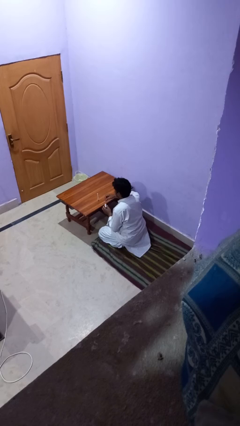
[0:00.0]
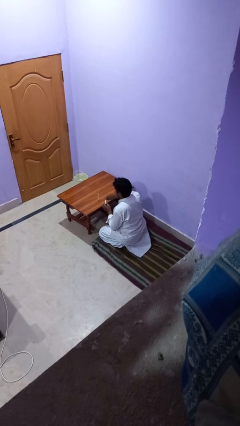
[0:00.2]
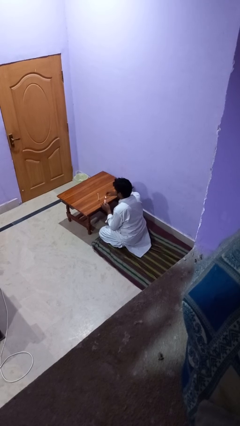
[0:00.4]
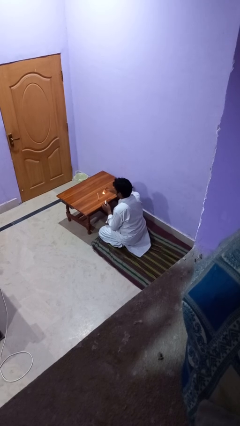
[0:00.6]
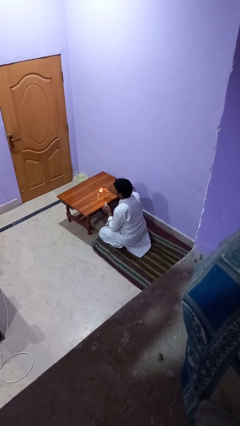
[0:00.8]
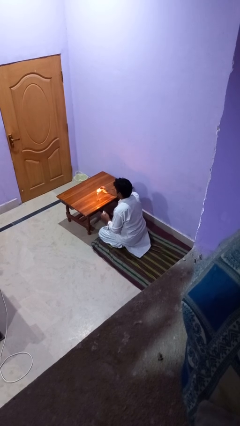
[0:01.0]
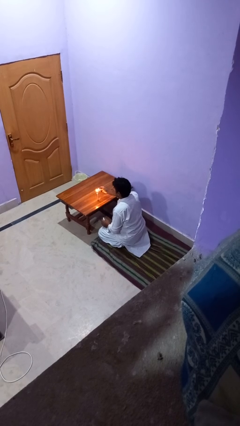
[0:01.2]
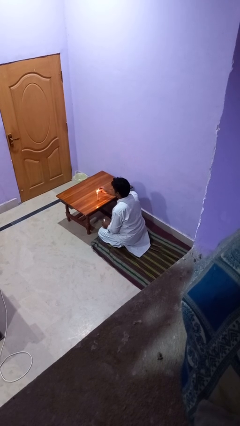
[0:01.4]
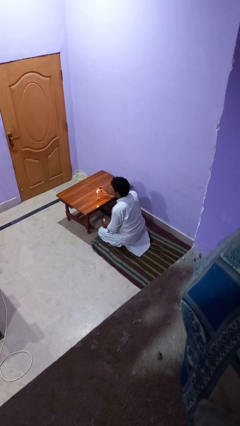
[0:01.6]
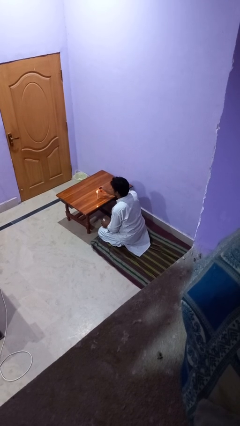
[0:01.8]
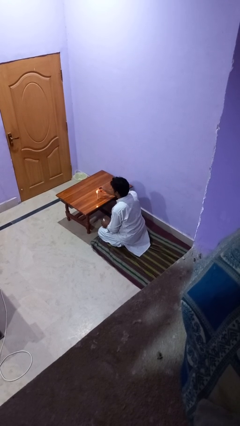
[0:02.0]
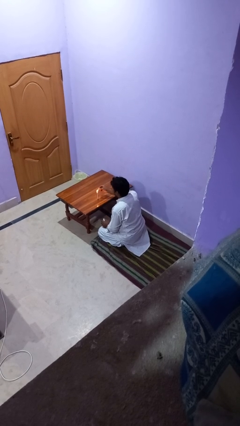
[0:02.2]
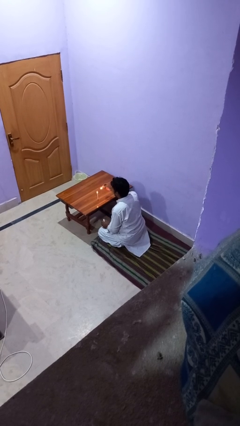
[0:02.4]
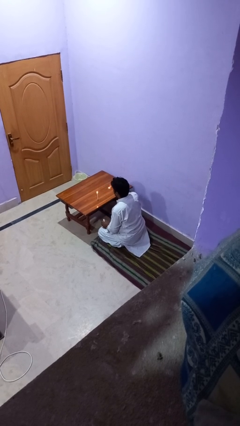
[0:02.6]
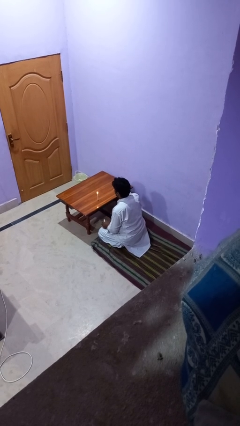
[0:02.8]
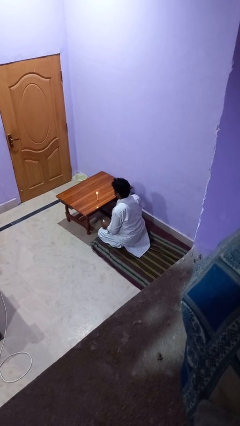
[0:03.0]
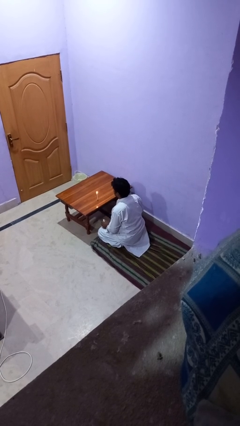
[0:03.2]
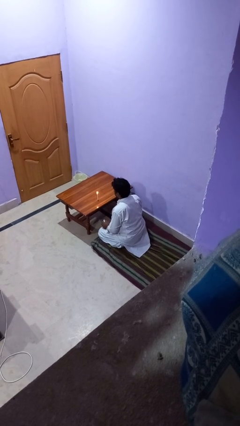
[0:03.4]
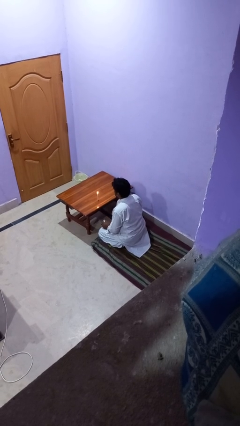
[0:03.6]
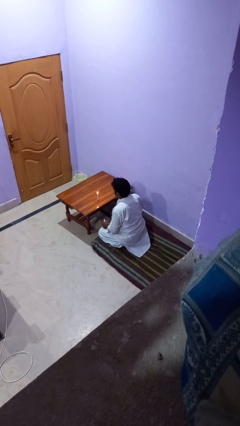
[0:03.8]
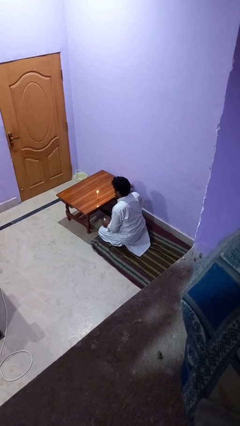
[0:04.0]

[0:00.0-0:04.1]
person lights candle

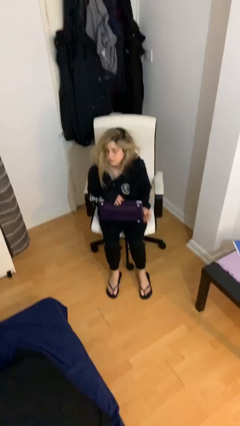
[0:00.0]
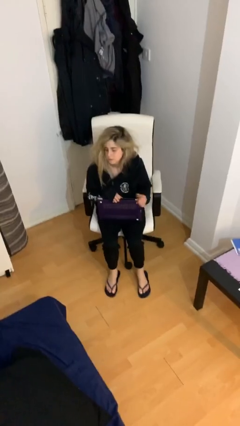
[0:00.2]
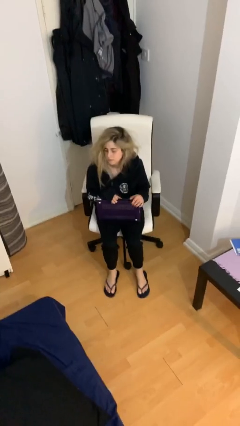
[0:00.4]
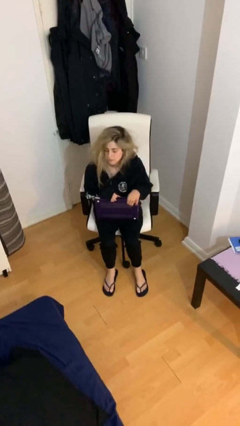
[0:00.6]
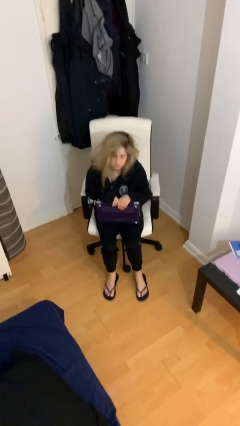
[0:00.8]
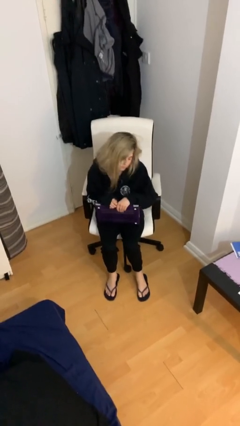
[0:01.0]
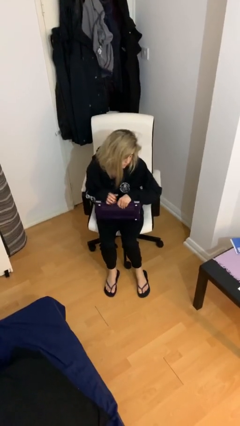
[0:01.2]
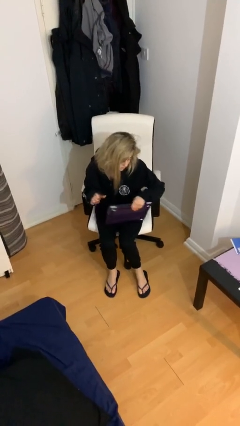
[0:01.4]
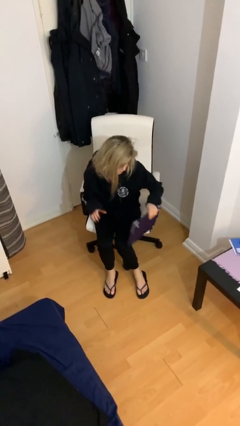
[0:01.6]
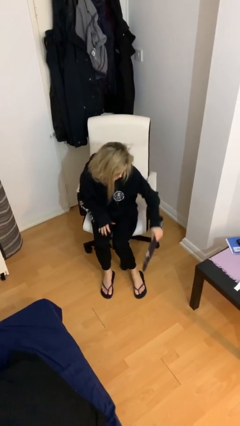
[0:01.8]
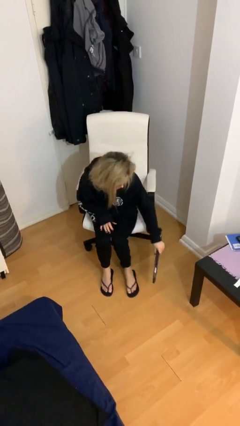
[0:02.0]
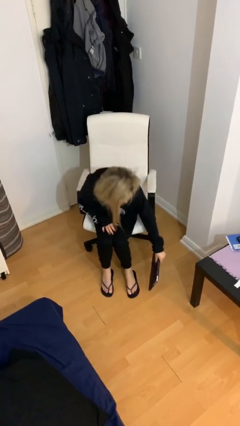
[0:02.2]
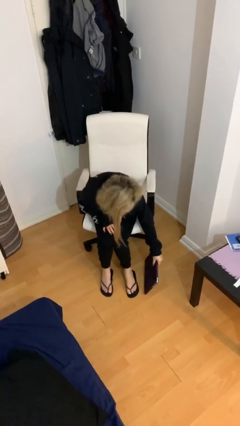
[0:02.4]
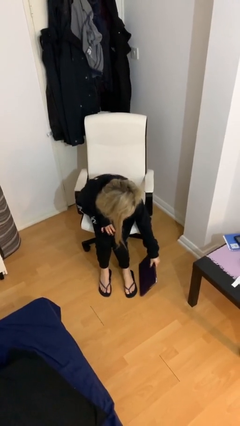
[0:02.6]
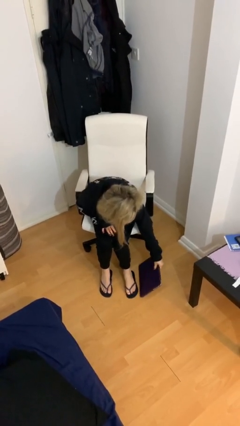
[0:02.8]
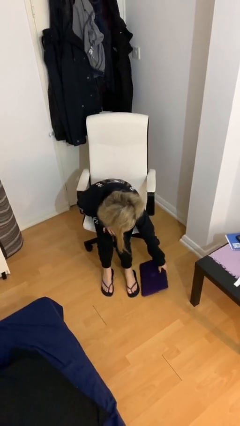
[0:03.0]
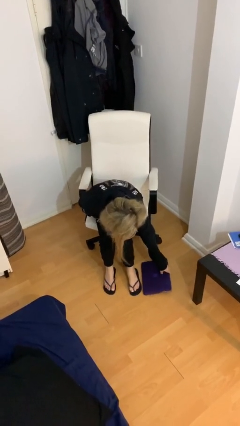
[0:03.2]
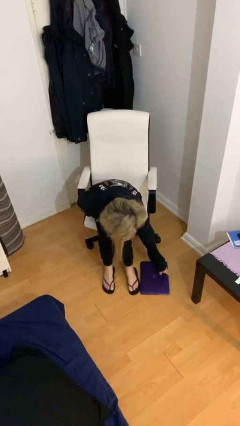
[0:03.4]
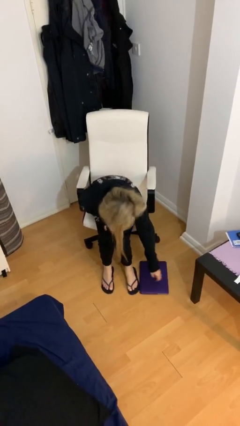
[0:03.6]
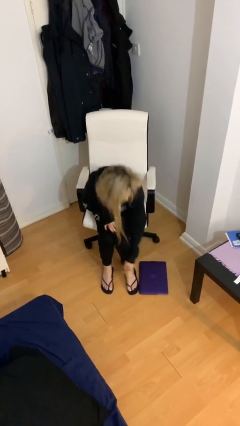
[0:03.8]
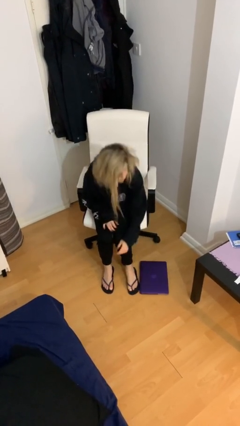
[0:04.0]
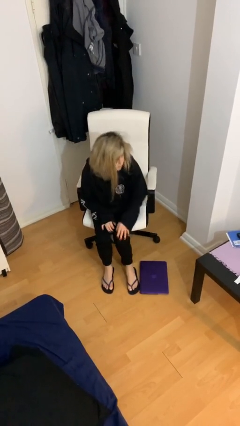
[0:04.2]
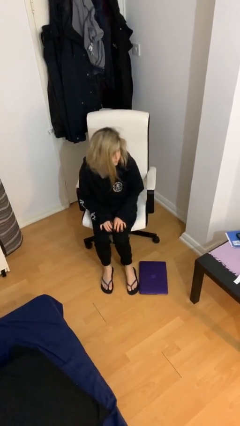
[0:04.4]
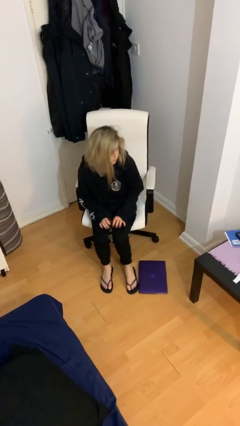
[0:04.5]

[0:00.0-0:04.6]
person puts down object on floor

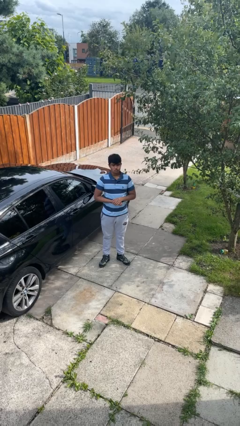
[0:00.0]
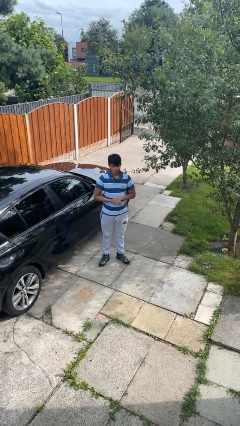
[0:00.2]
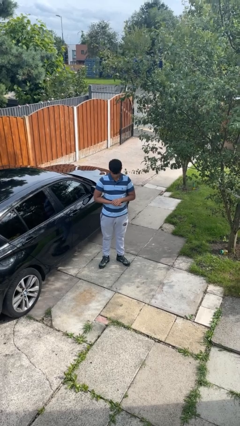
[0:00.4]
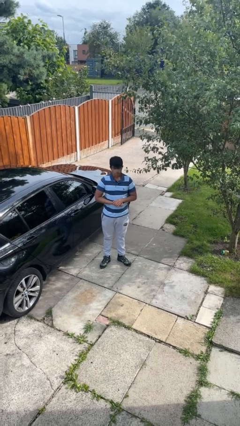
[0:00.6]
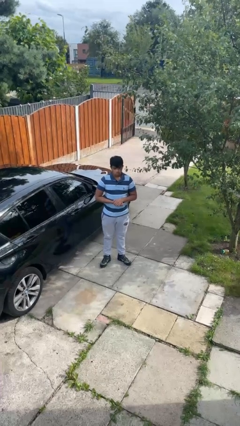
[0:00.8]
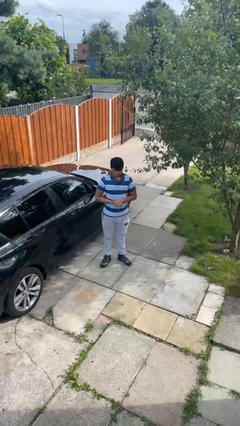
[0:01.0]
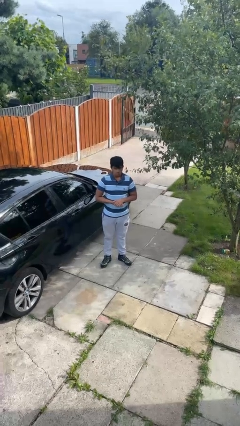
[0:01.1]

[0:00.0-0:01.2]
person nods head

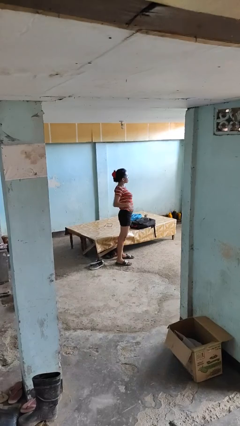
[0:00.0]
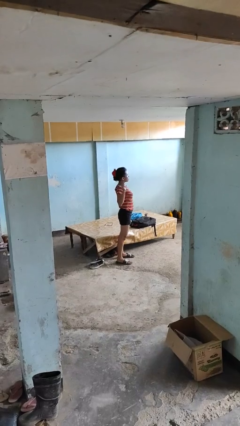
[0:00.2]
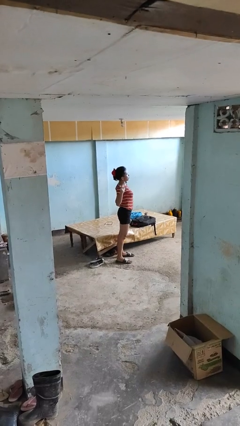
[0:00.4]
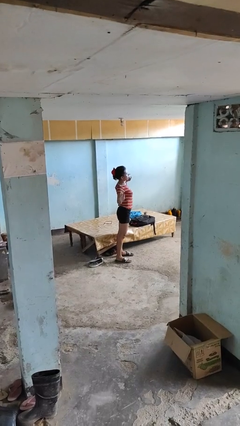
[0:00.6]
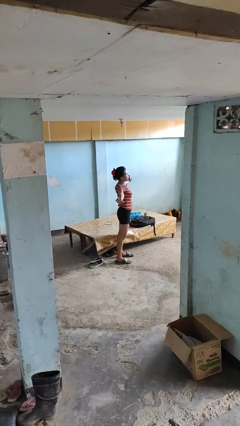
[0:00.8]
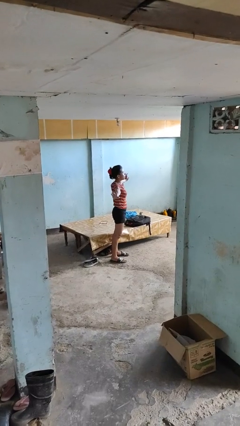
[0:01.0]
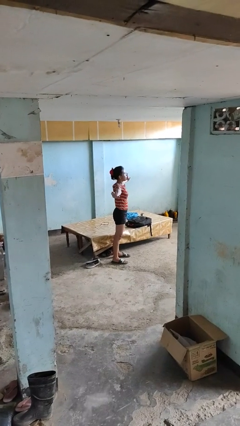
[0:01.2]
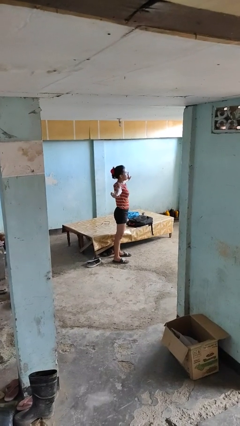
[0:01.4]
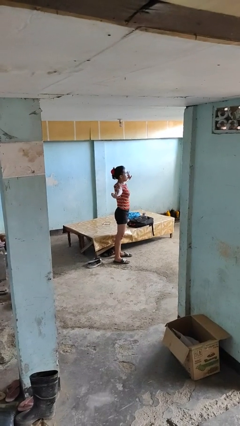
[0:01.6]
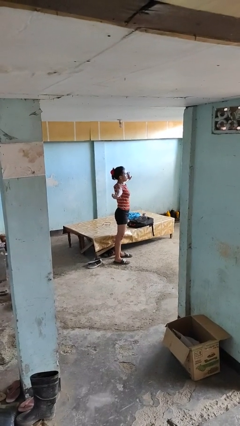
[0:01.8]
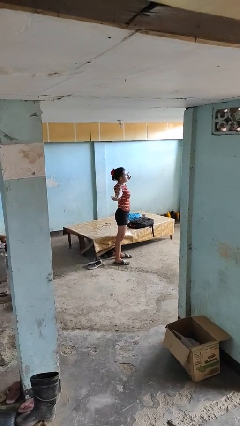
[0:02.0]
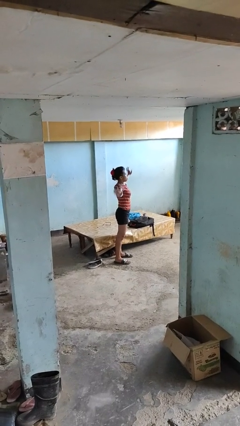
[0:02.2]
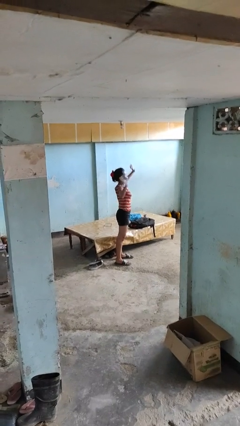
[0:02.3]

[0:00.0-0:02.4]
person stretches arms to side

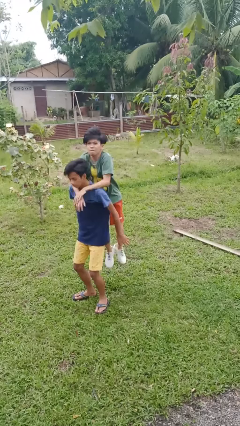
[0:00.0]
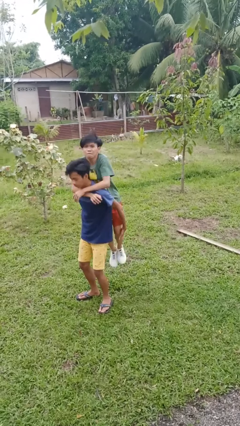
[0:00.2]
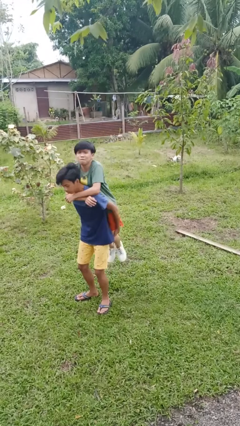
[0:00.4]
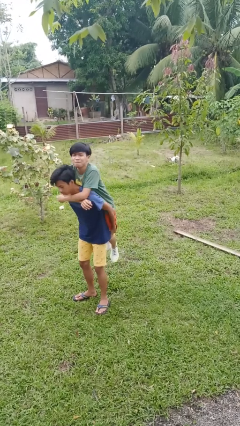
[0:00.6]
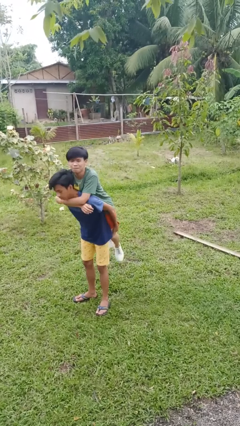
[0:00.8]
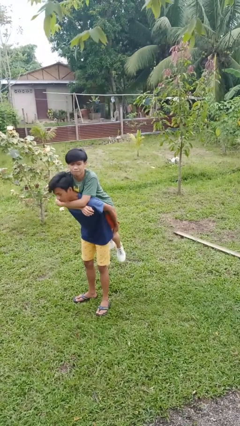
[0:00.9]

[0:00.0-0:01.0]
person carries person over shoulder

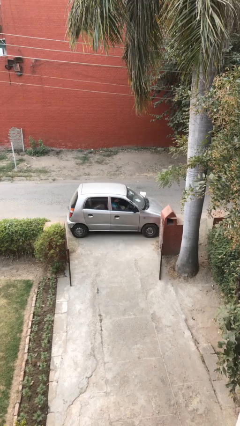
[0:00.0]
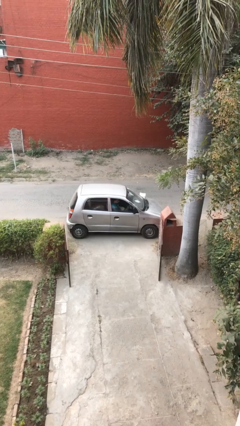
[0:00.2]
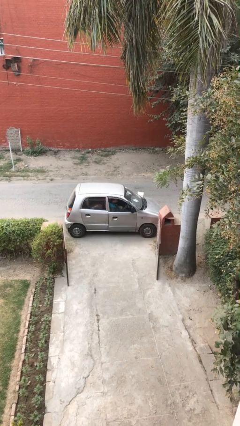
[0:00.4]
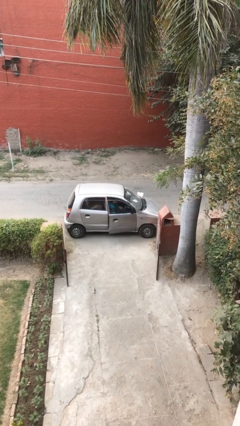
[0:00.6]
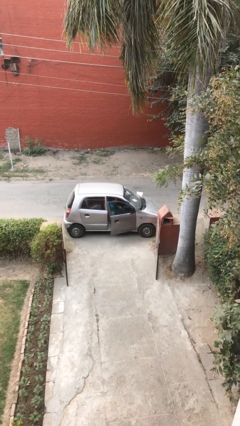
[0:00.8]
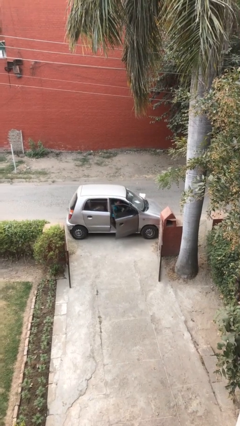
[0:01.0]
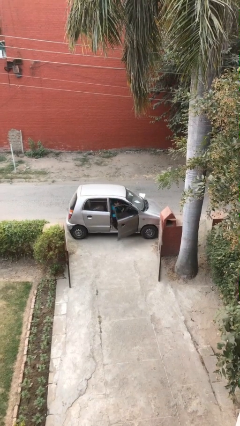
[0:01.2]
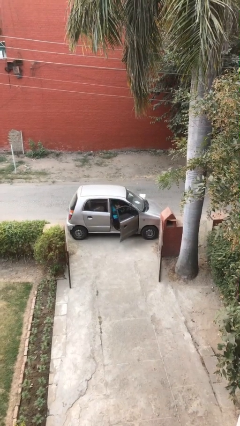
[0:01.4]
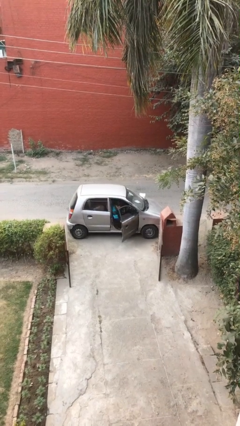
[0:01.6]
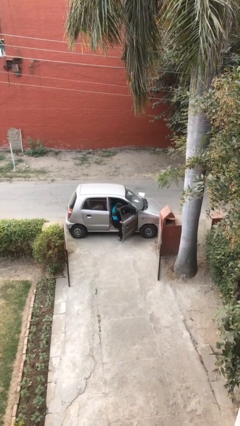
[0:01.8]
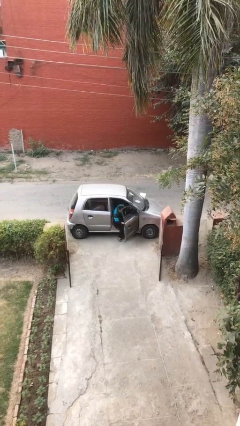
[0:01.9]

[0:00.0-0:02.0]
person opens car door

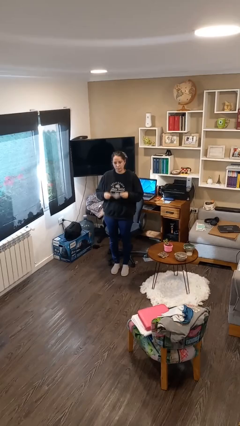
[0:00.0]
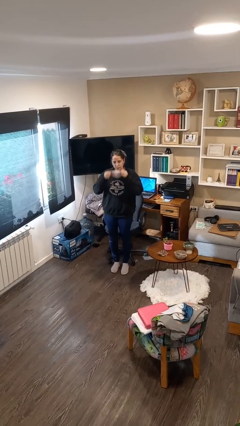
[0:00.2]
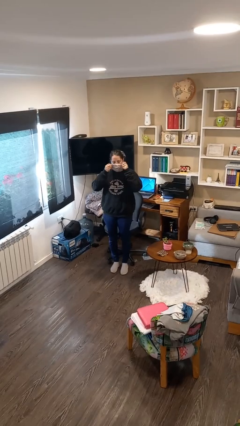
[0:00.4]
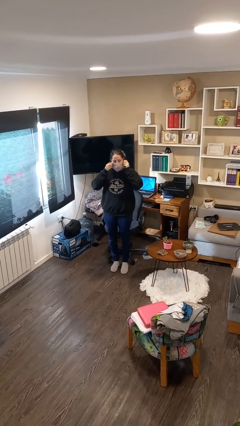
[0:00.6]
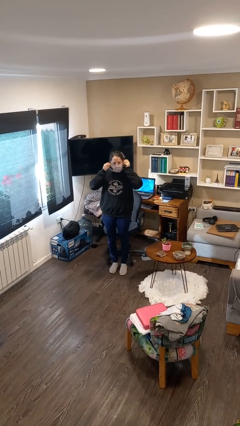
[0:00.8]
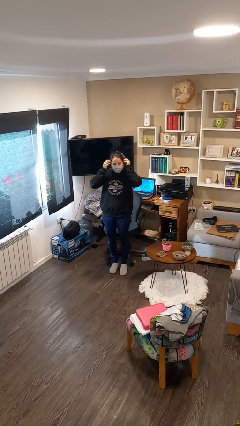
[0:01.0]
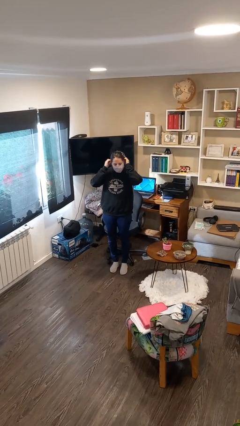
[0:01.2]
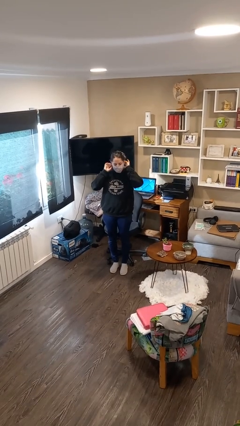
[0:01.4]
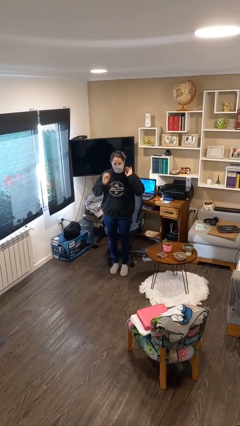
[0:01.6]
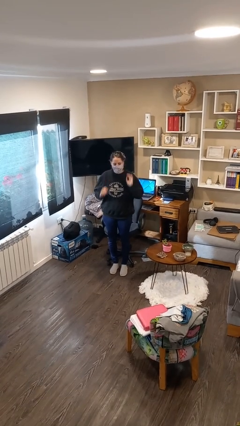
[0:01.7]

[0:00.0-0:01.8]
person puts on facemask
